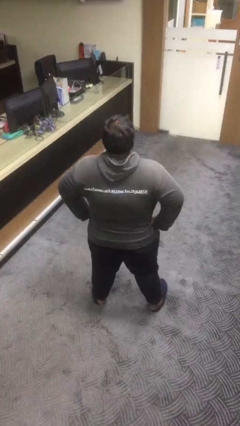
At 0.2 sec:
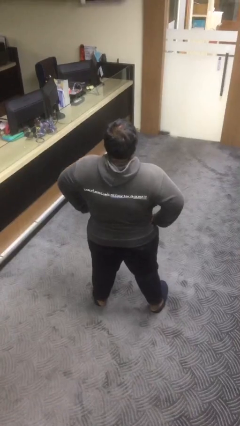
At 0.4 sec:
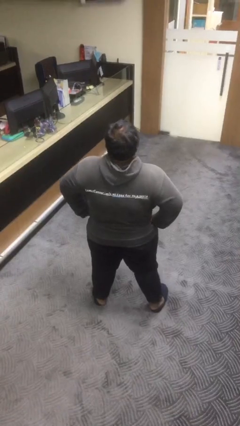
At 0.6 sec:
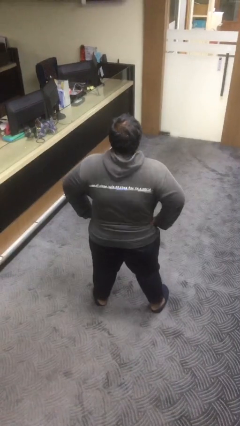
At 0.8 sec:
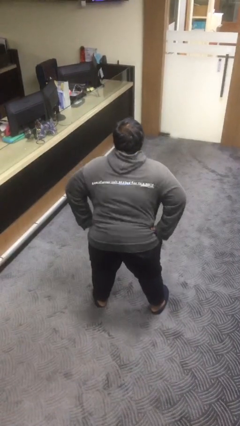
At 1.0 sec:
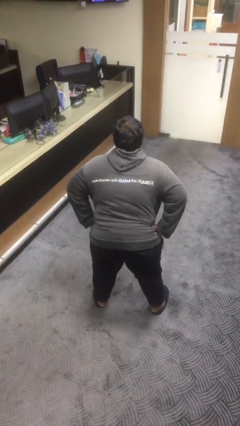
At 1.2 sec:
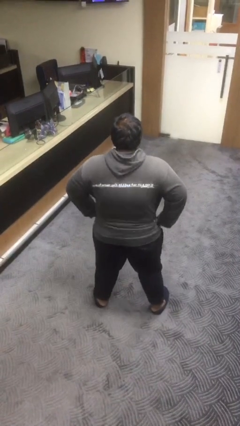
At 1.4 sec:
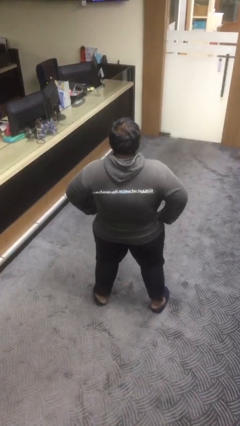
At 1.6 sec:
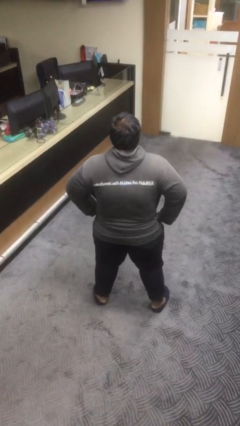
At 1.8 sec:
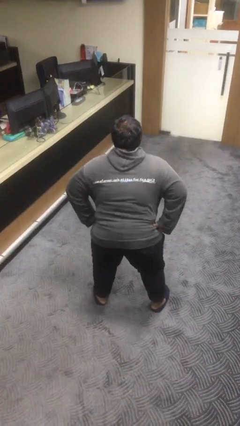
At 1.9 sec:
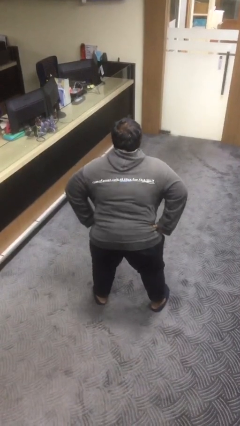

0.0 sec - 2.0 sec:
person wiggles hips

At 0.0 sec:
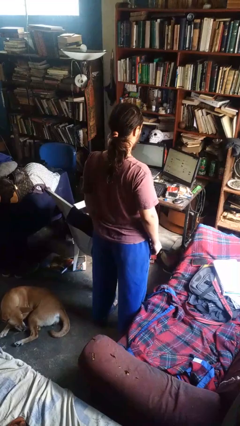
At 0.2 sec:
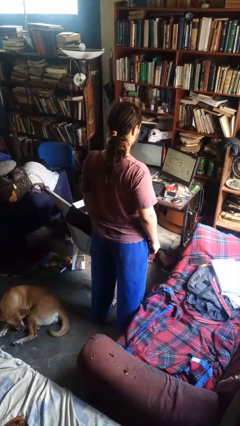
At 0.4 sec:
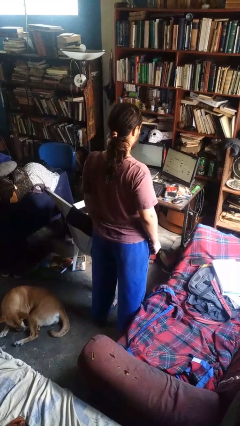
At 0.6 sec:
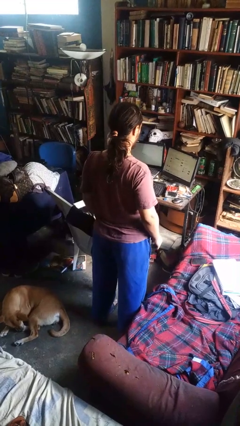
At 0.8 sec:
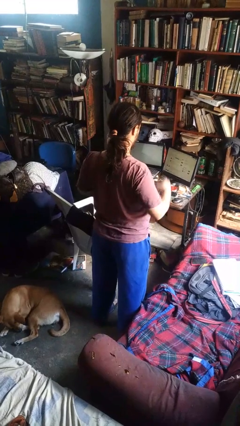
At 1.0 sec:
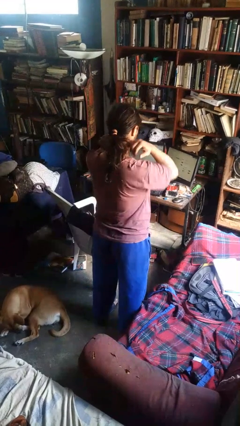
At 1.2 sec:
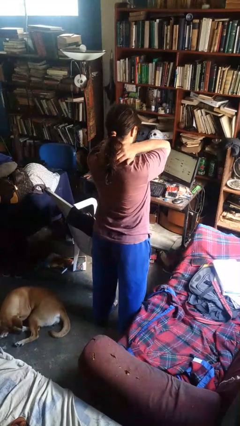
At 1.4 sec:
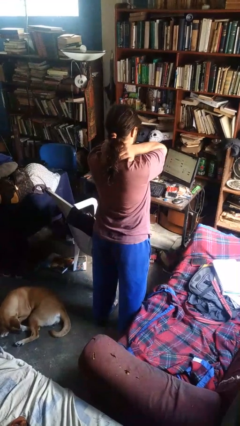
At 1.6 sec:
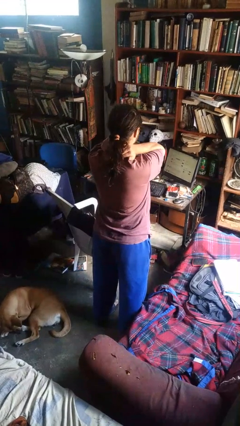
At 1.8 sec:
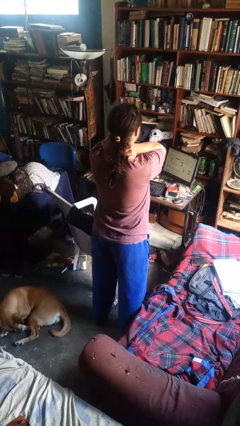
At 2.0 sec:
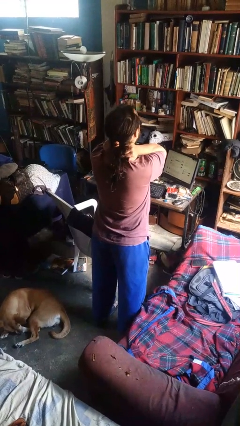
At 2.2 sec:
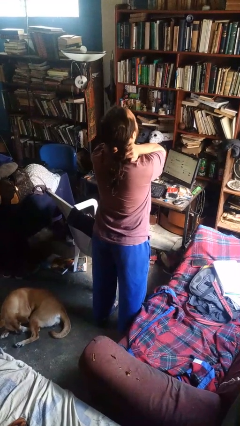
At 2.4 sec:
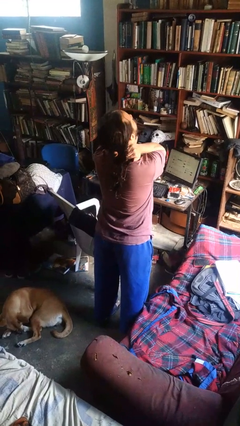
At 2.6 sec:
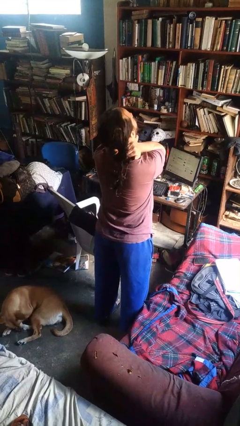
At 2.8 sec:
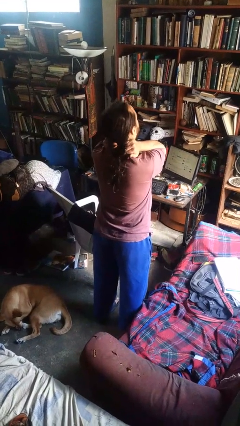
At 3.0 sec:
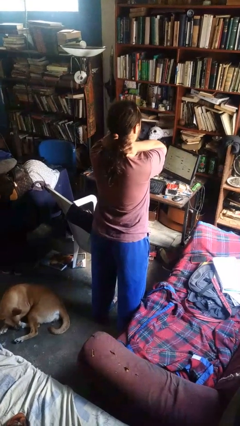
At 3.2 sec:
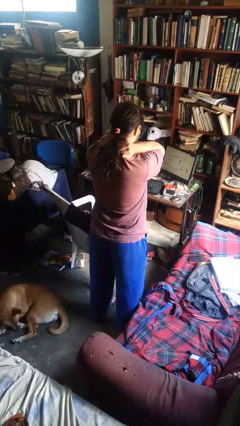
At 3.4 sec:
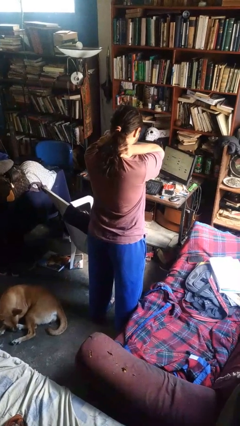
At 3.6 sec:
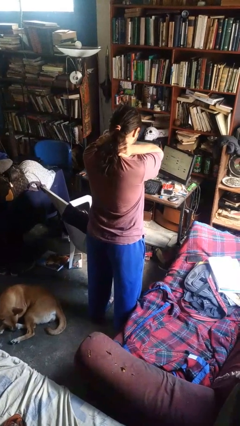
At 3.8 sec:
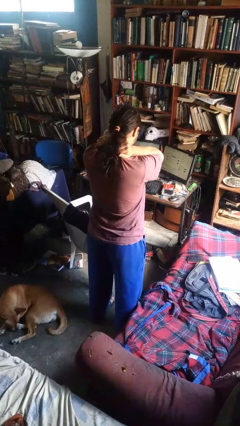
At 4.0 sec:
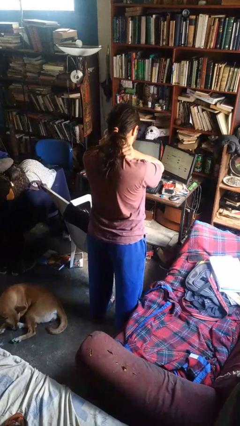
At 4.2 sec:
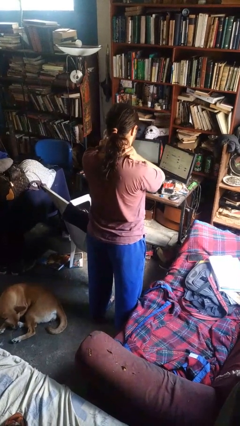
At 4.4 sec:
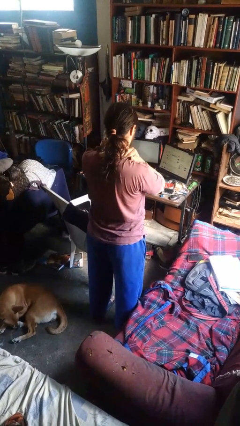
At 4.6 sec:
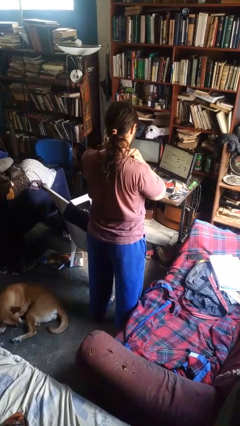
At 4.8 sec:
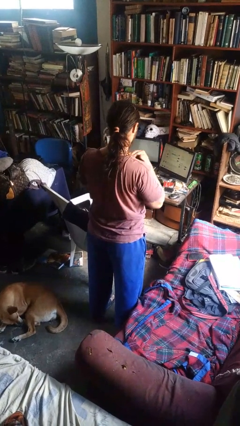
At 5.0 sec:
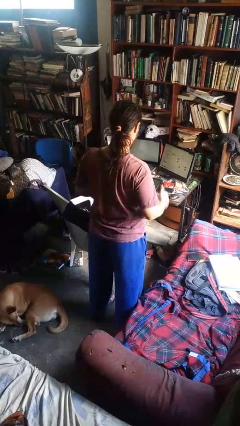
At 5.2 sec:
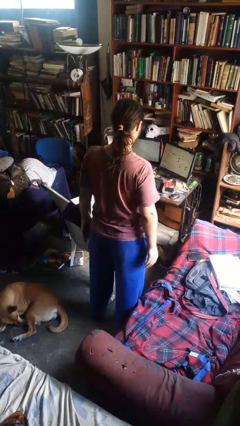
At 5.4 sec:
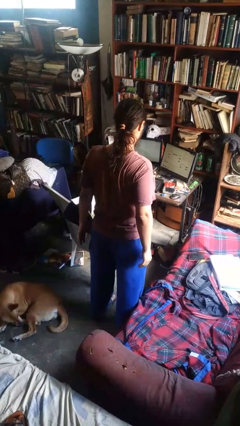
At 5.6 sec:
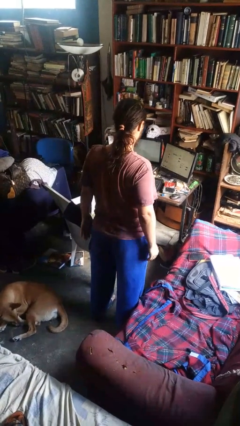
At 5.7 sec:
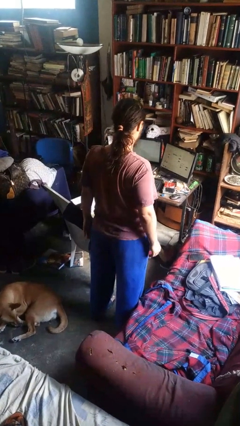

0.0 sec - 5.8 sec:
person rubs neck

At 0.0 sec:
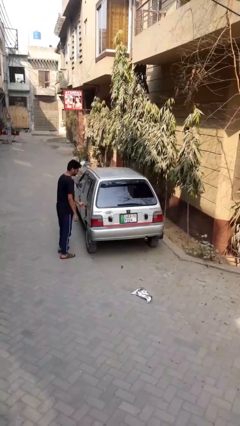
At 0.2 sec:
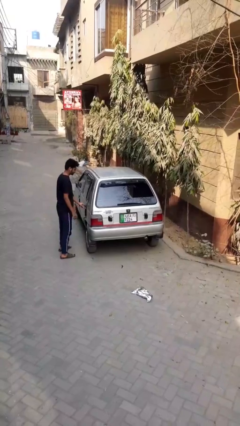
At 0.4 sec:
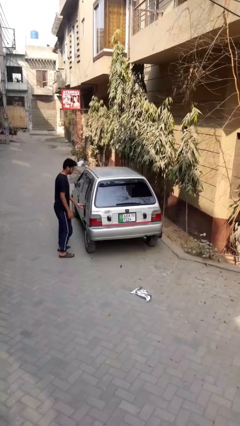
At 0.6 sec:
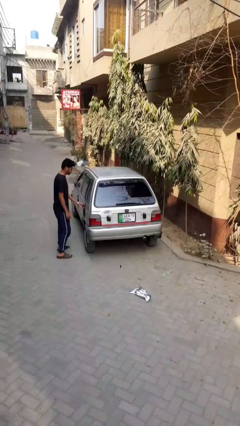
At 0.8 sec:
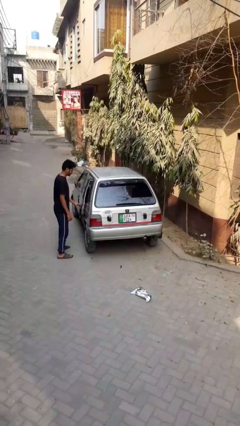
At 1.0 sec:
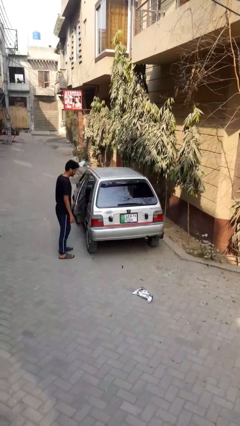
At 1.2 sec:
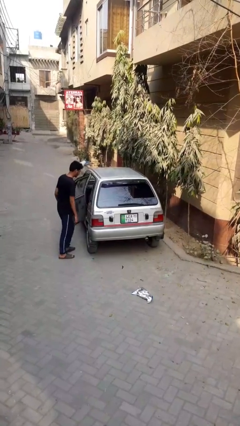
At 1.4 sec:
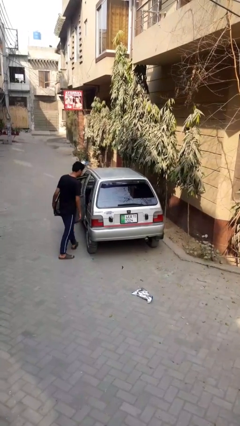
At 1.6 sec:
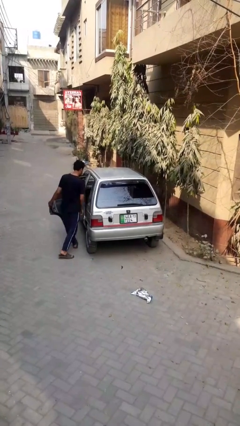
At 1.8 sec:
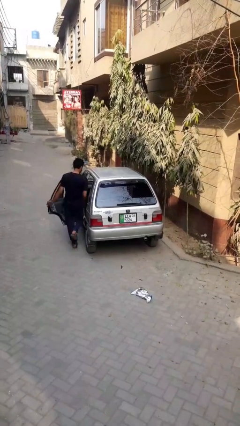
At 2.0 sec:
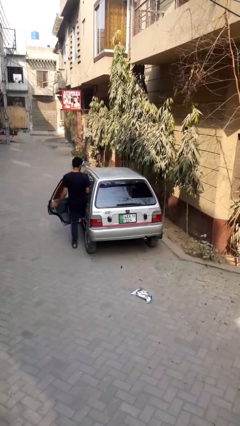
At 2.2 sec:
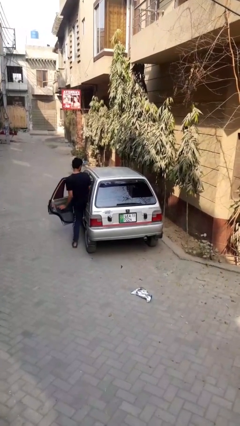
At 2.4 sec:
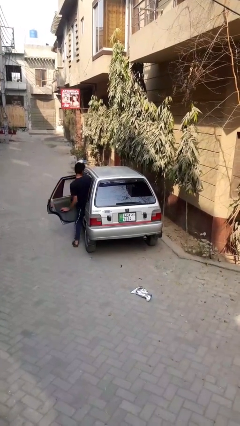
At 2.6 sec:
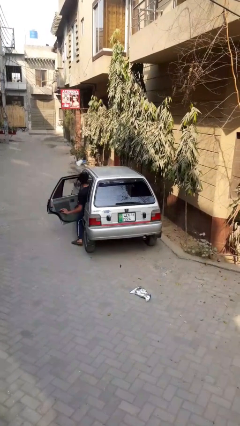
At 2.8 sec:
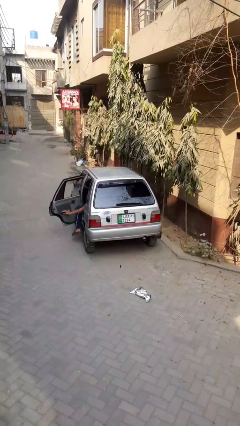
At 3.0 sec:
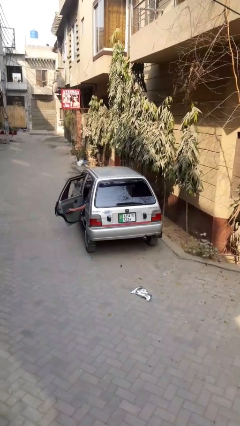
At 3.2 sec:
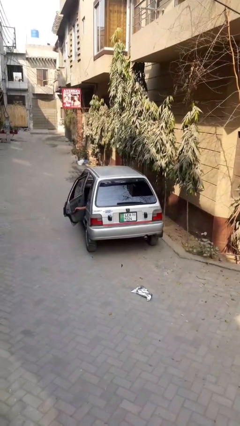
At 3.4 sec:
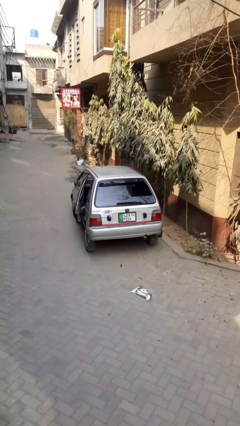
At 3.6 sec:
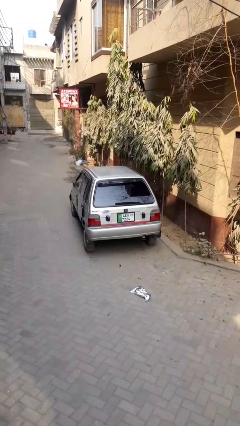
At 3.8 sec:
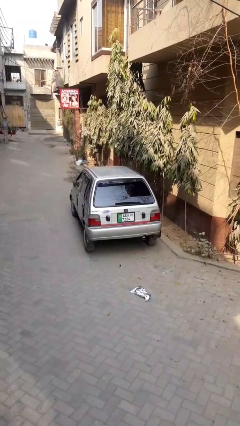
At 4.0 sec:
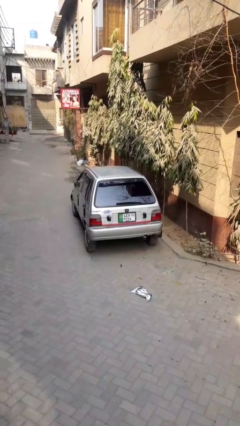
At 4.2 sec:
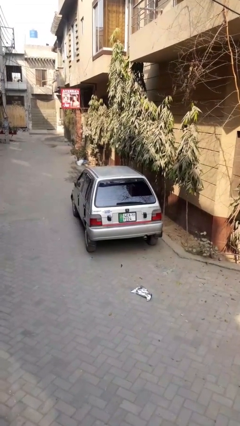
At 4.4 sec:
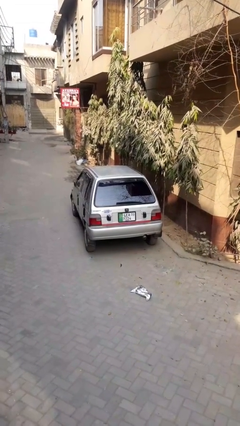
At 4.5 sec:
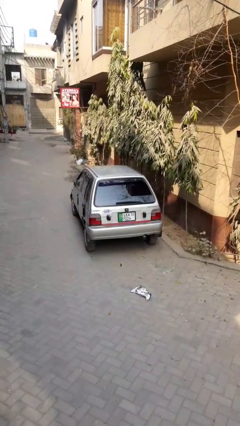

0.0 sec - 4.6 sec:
car picks up person

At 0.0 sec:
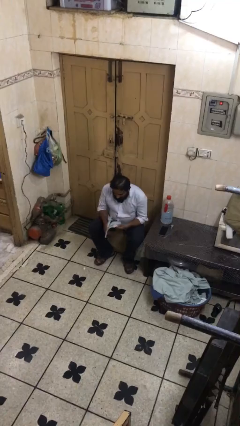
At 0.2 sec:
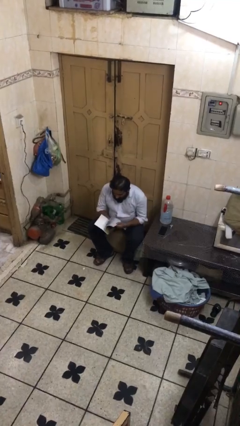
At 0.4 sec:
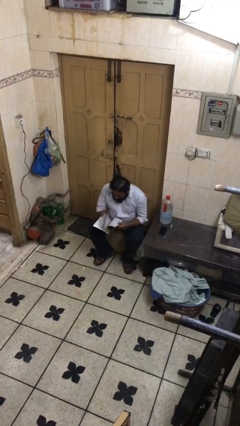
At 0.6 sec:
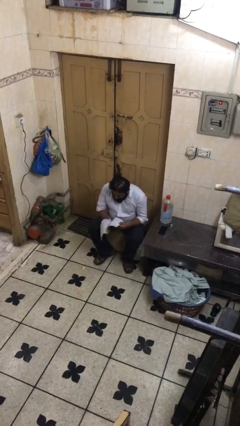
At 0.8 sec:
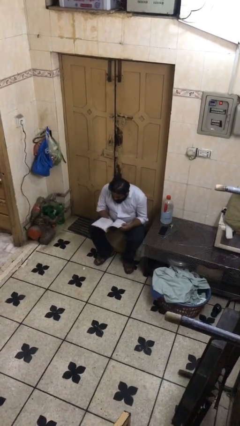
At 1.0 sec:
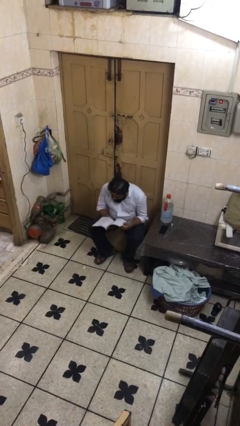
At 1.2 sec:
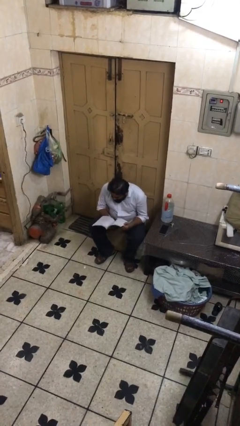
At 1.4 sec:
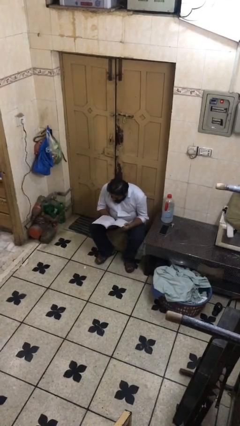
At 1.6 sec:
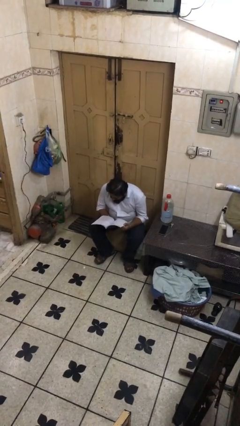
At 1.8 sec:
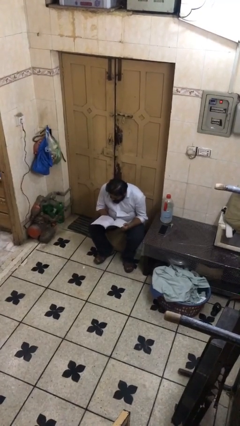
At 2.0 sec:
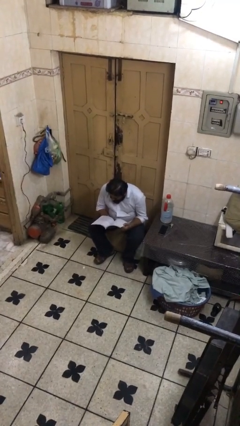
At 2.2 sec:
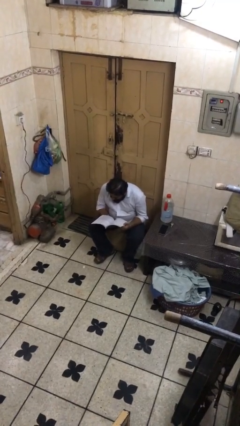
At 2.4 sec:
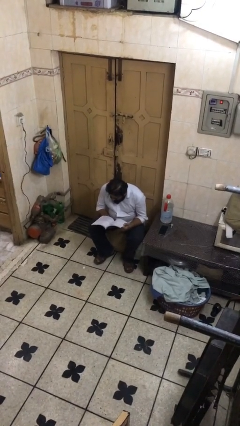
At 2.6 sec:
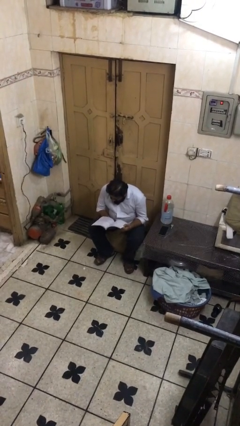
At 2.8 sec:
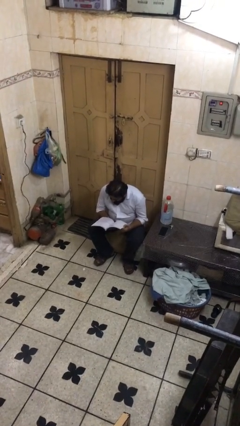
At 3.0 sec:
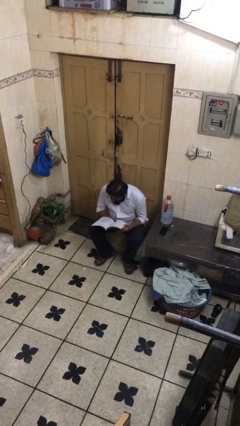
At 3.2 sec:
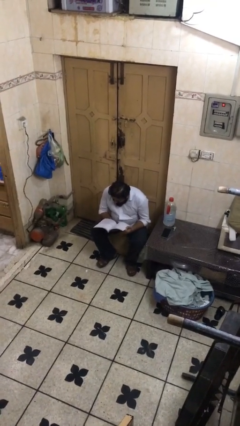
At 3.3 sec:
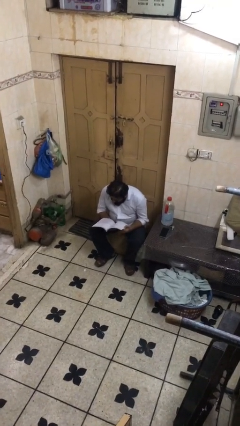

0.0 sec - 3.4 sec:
person reads document

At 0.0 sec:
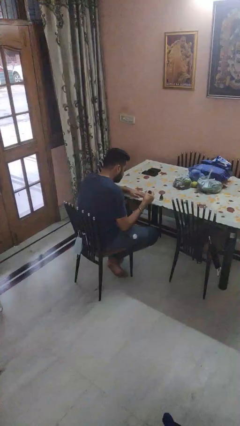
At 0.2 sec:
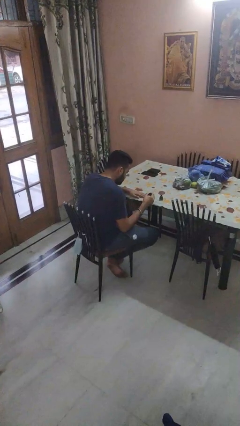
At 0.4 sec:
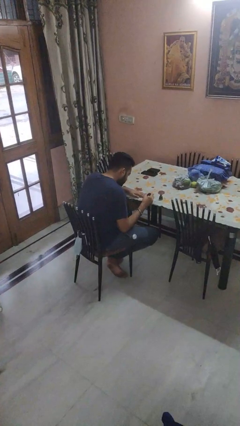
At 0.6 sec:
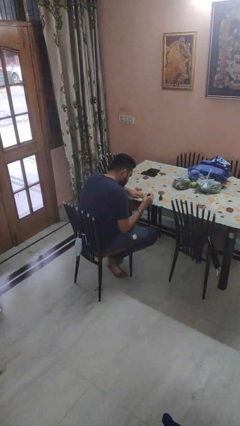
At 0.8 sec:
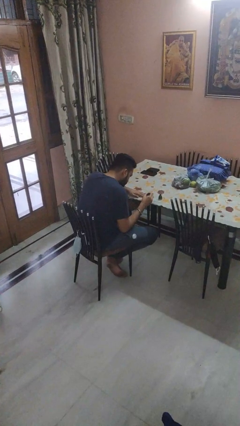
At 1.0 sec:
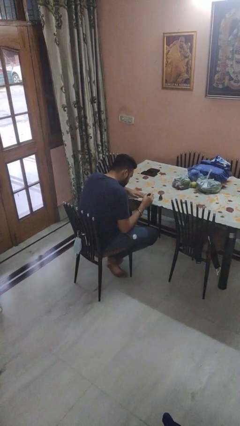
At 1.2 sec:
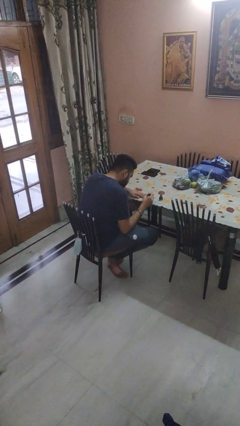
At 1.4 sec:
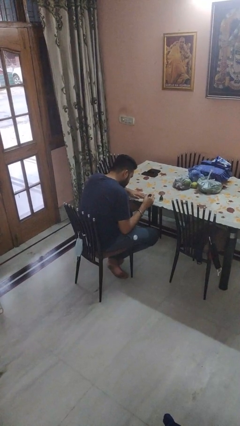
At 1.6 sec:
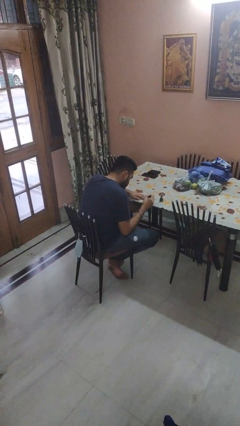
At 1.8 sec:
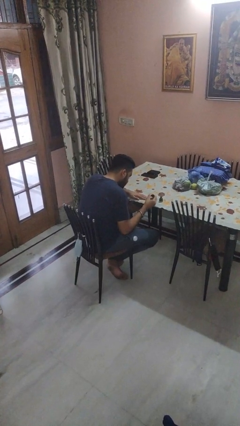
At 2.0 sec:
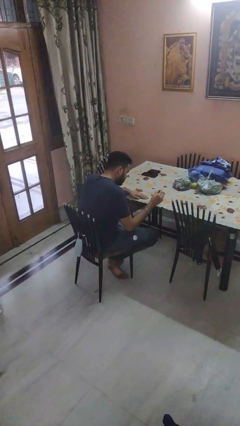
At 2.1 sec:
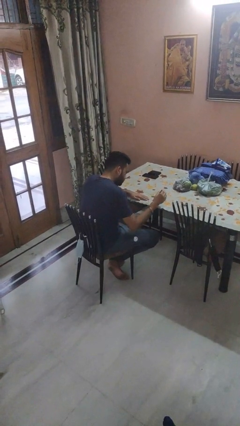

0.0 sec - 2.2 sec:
person paints fingernails
